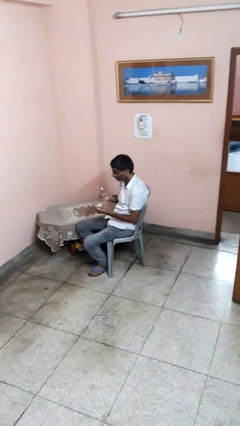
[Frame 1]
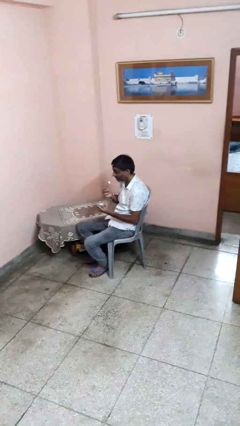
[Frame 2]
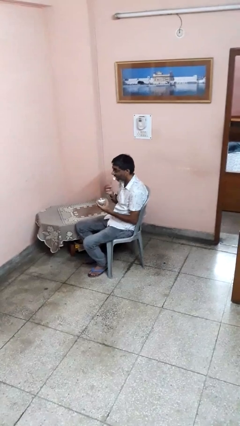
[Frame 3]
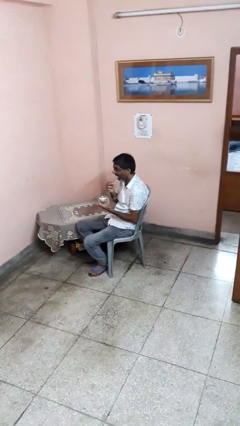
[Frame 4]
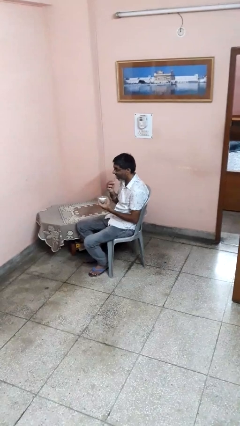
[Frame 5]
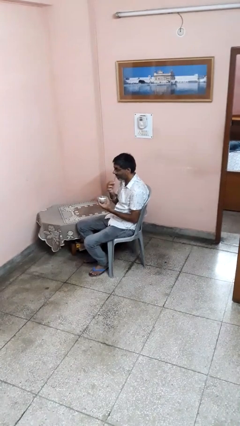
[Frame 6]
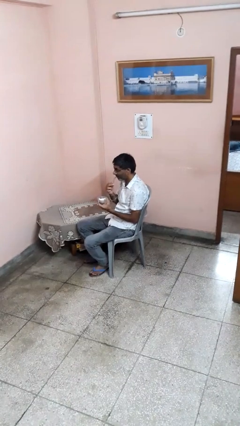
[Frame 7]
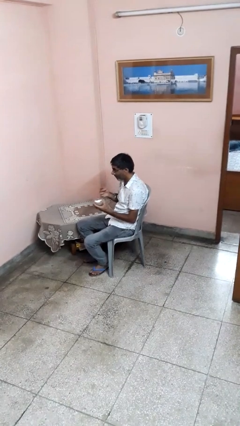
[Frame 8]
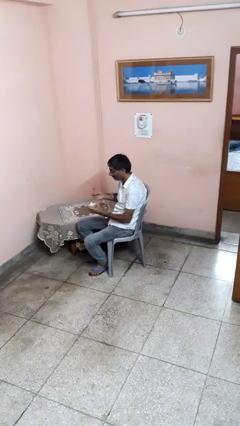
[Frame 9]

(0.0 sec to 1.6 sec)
person eats with utensil

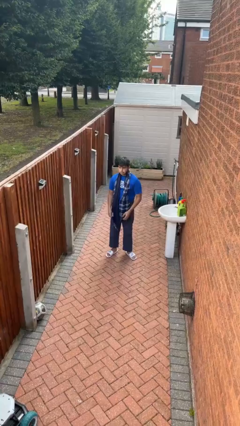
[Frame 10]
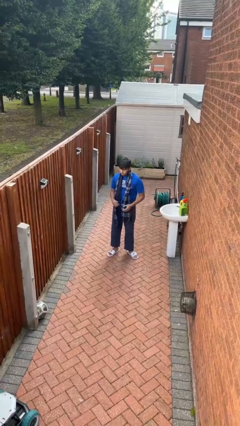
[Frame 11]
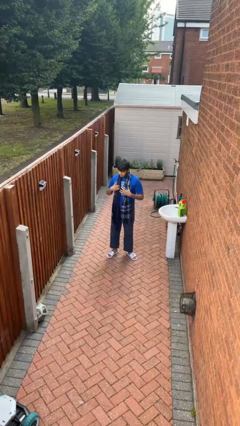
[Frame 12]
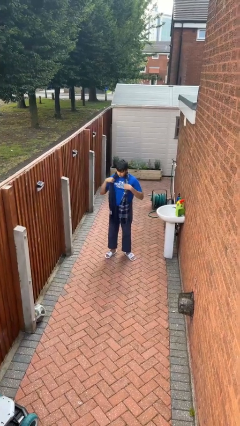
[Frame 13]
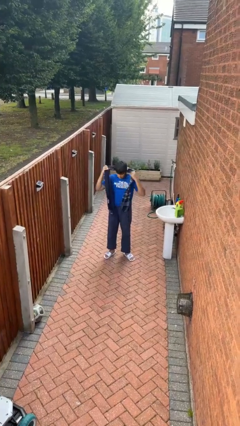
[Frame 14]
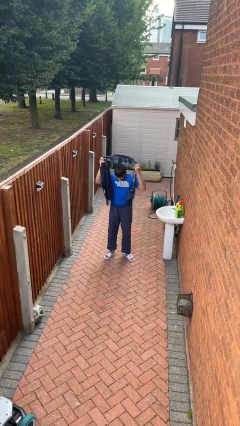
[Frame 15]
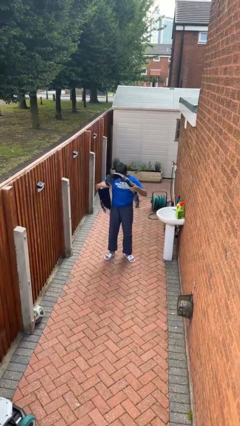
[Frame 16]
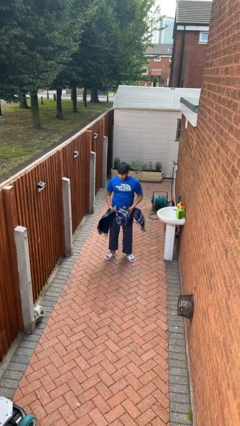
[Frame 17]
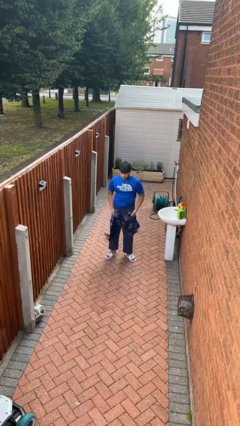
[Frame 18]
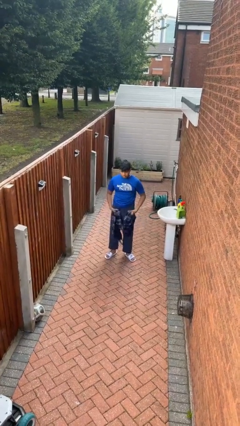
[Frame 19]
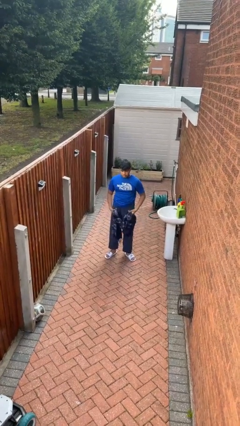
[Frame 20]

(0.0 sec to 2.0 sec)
person takes off scarf

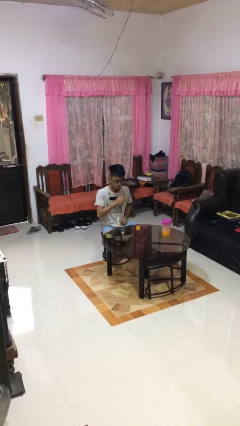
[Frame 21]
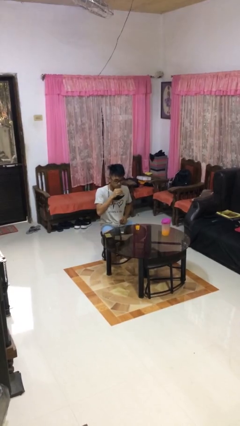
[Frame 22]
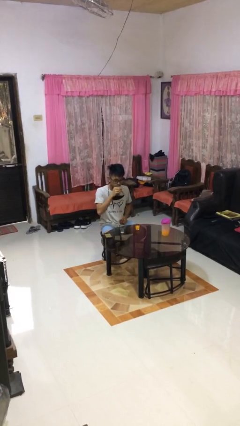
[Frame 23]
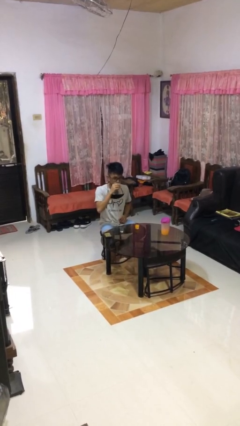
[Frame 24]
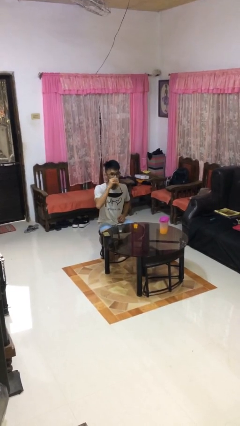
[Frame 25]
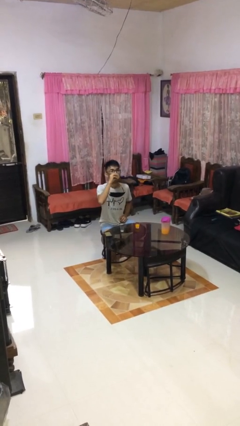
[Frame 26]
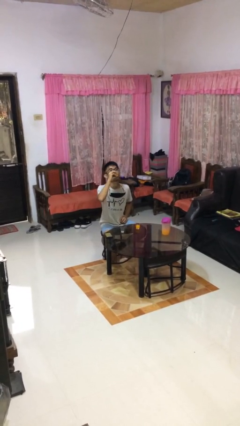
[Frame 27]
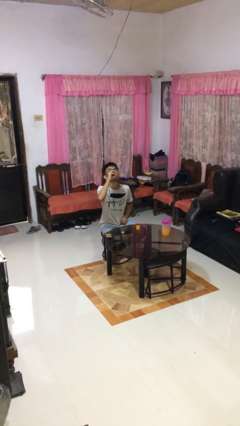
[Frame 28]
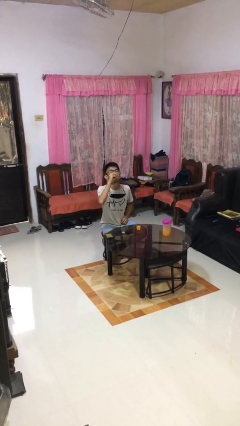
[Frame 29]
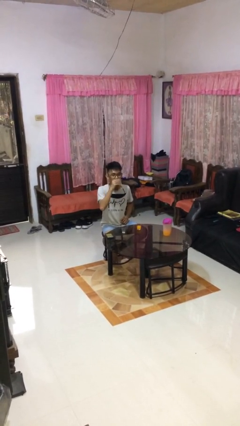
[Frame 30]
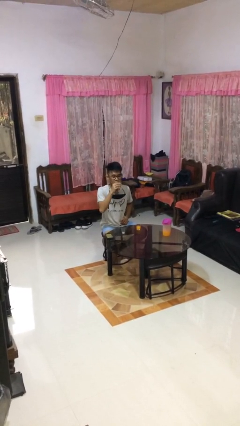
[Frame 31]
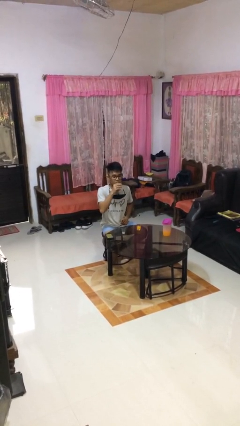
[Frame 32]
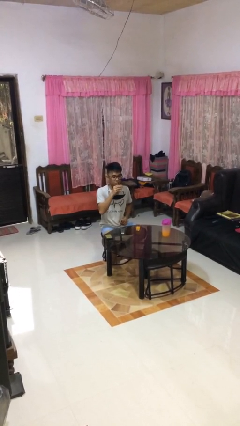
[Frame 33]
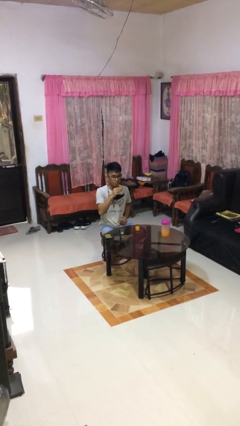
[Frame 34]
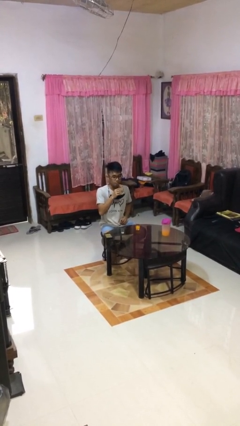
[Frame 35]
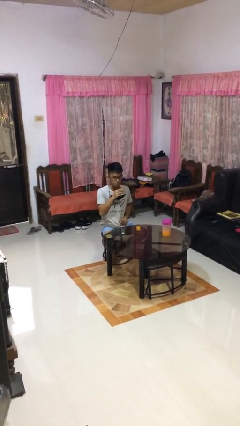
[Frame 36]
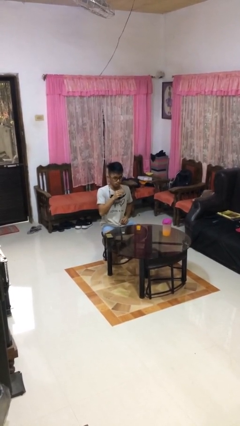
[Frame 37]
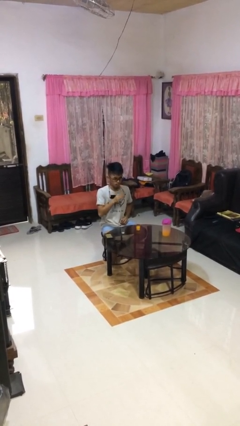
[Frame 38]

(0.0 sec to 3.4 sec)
person drinks from shotglass

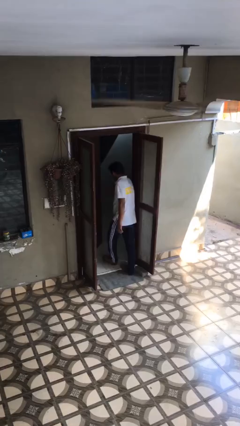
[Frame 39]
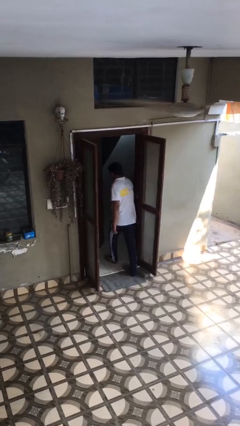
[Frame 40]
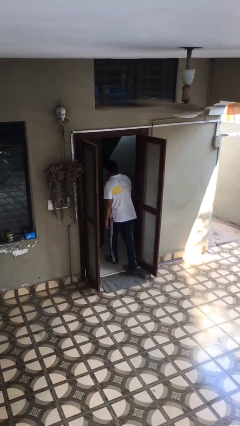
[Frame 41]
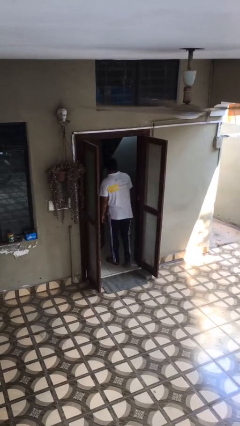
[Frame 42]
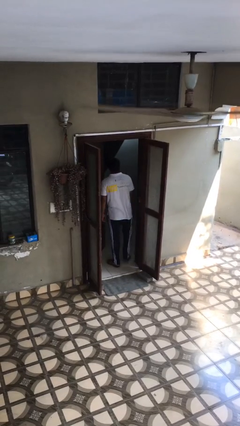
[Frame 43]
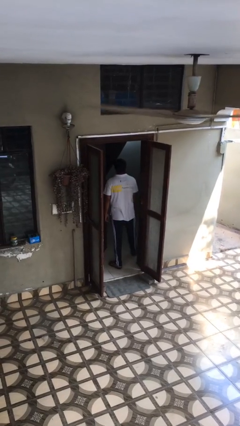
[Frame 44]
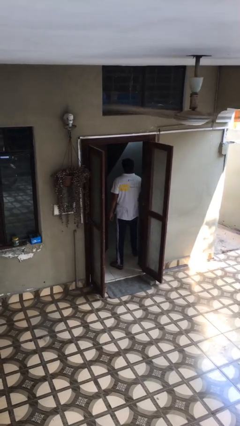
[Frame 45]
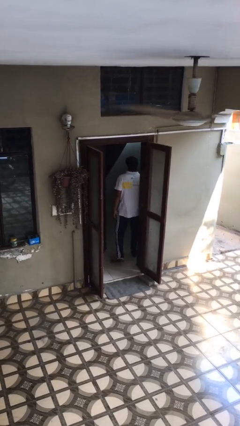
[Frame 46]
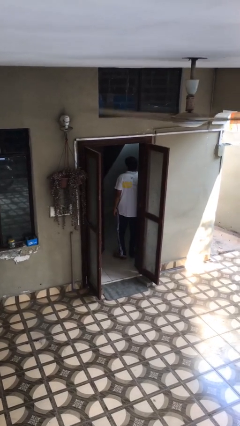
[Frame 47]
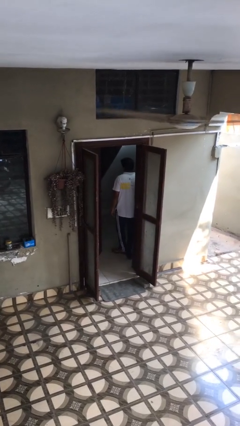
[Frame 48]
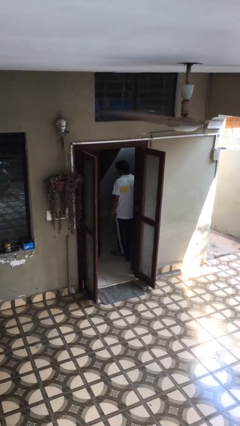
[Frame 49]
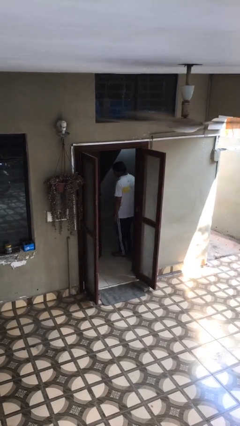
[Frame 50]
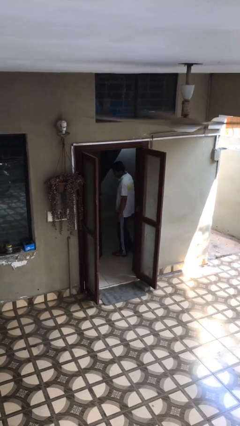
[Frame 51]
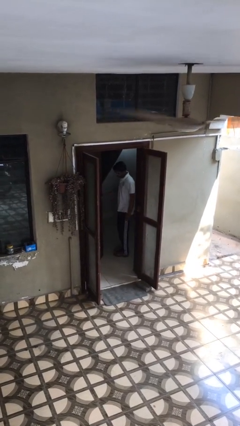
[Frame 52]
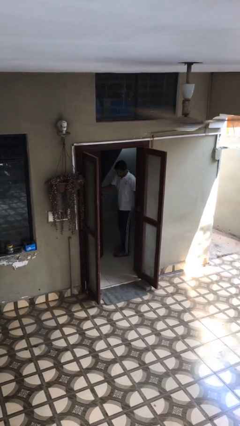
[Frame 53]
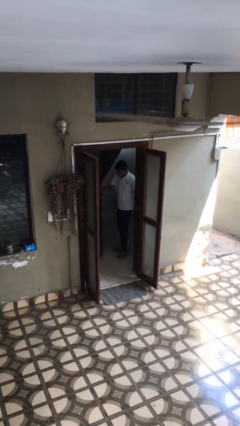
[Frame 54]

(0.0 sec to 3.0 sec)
person exits scene through structure

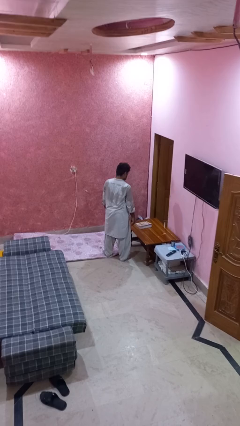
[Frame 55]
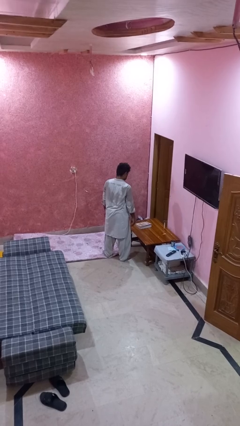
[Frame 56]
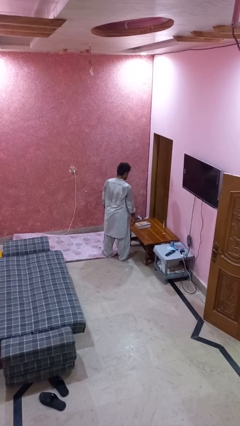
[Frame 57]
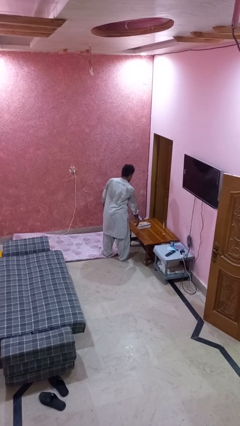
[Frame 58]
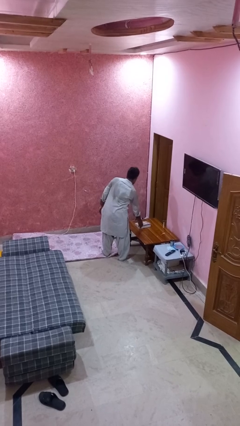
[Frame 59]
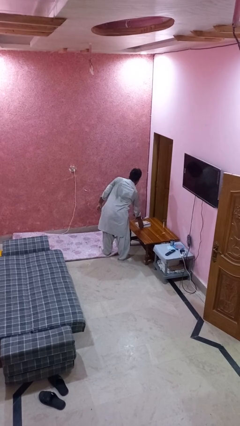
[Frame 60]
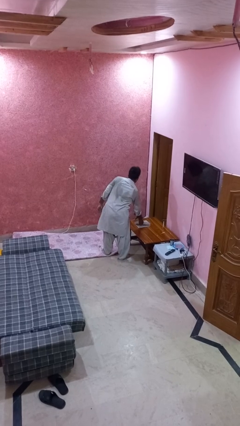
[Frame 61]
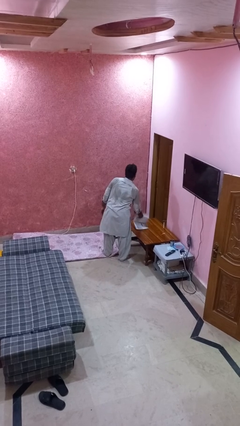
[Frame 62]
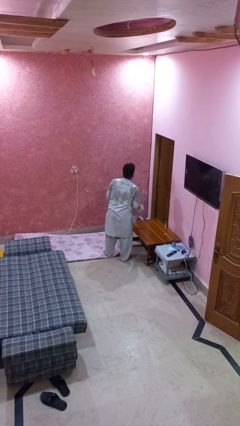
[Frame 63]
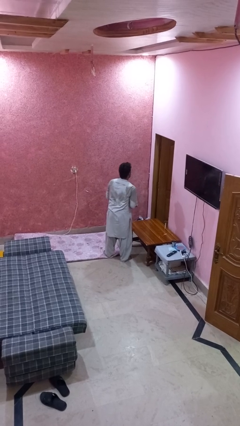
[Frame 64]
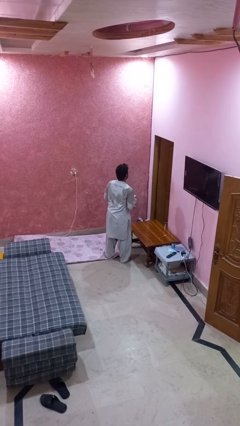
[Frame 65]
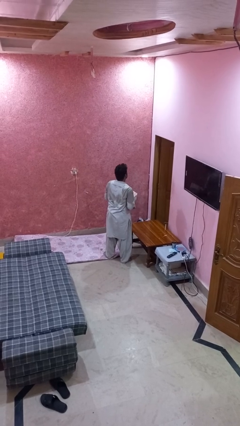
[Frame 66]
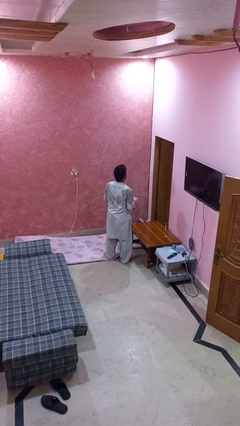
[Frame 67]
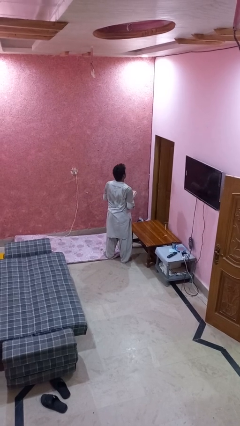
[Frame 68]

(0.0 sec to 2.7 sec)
person picks up object from table

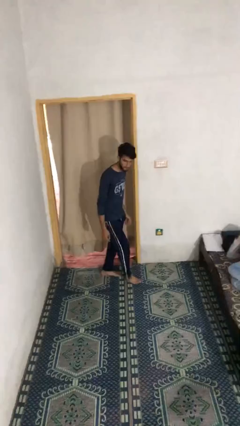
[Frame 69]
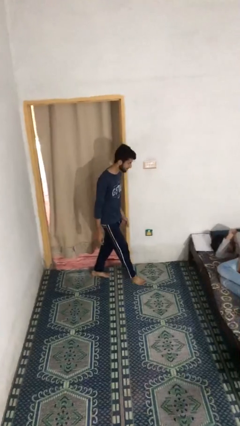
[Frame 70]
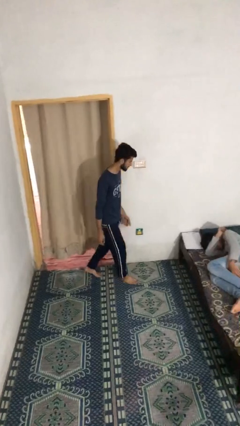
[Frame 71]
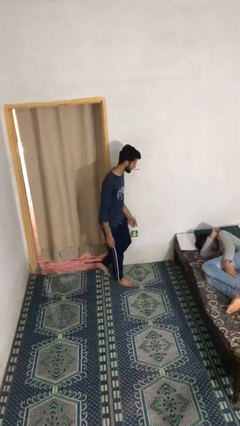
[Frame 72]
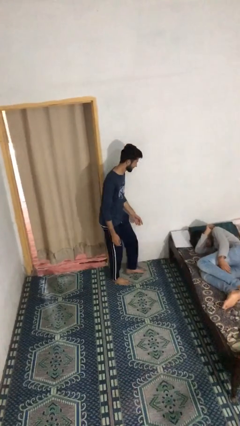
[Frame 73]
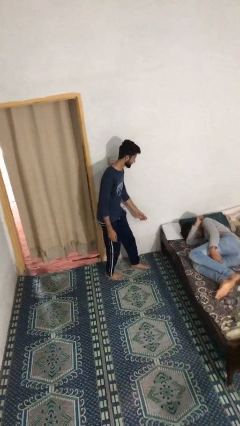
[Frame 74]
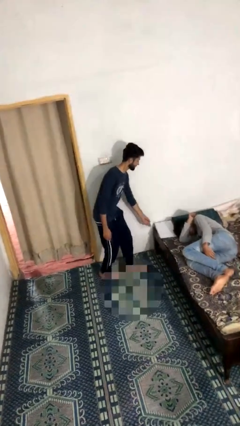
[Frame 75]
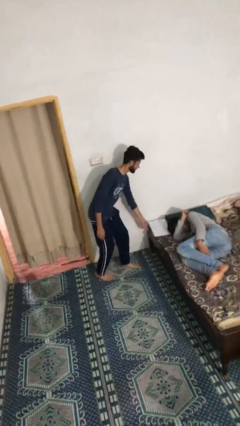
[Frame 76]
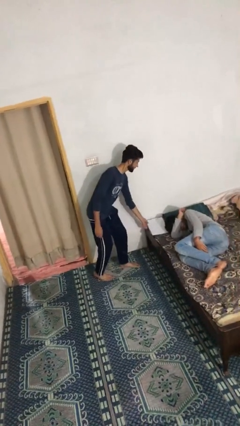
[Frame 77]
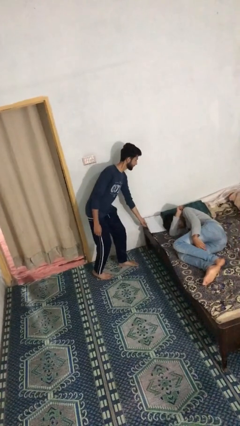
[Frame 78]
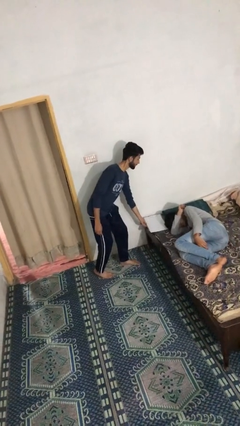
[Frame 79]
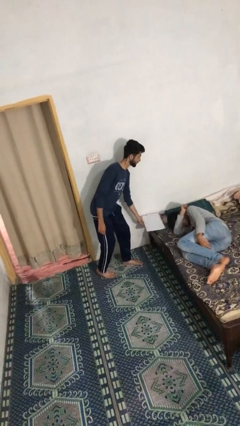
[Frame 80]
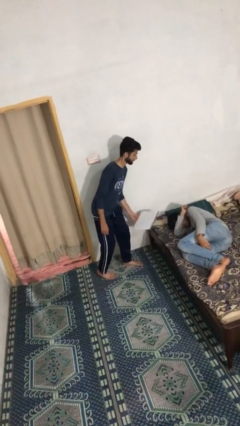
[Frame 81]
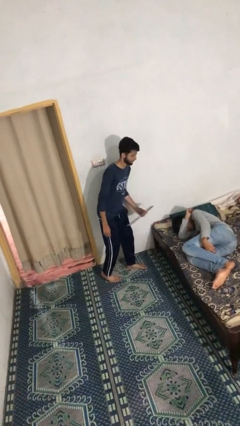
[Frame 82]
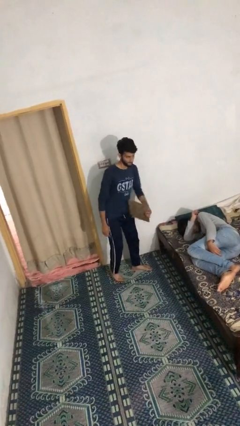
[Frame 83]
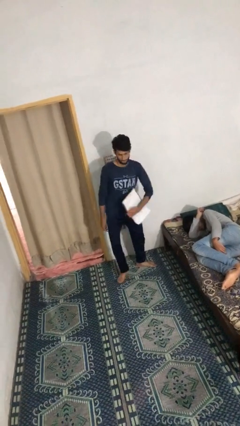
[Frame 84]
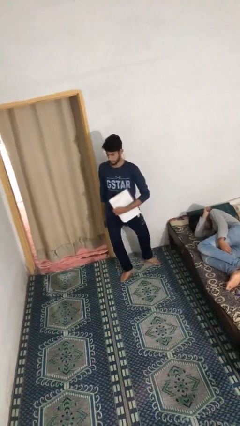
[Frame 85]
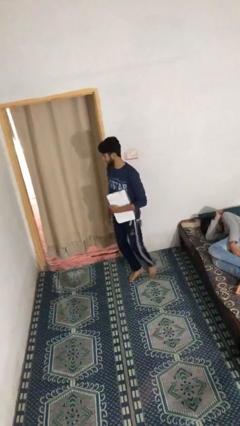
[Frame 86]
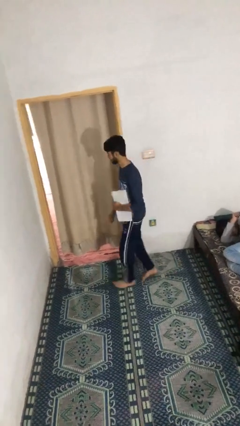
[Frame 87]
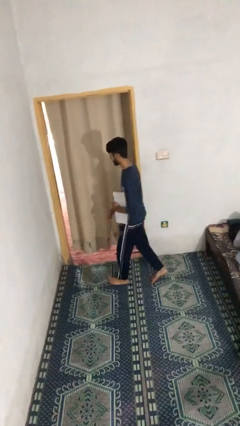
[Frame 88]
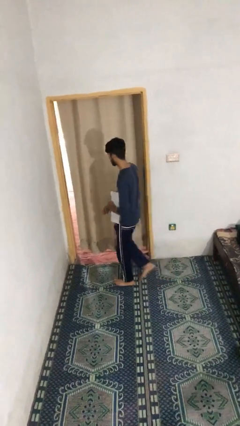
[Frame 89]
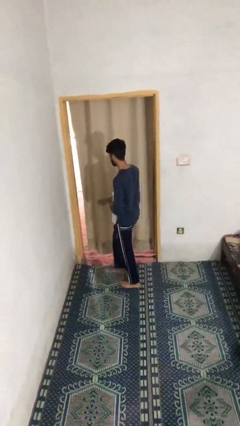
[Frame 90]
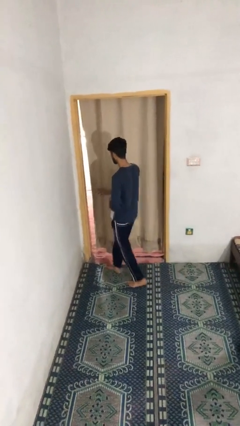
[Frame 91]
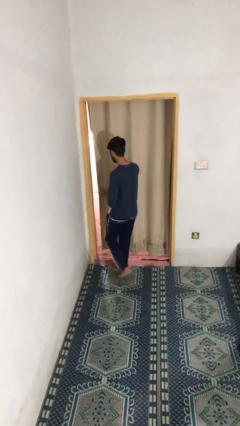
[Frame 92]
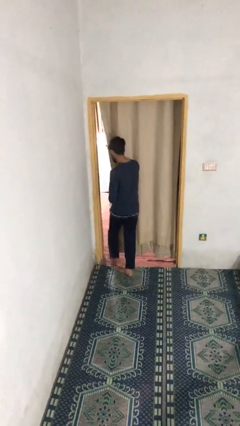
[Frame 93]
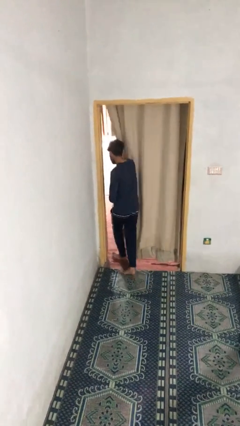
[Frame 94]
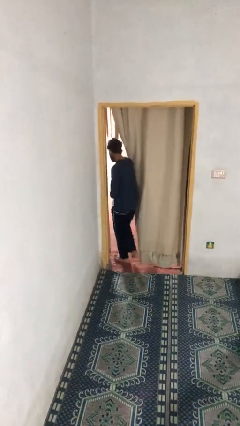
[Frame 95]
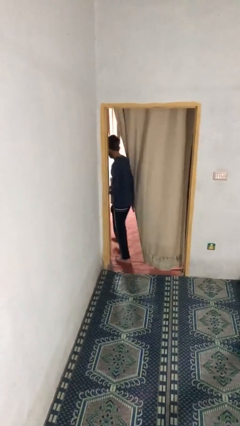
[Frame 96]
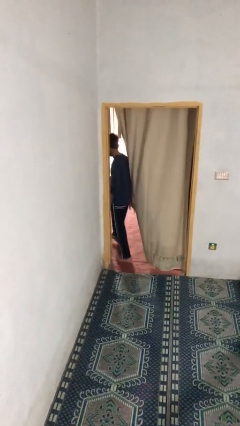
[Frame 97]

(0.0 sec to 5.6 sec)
person steals object from person
